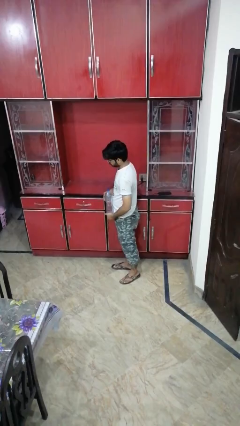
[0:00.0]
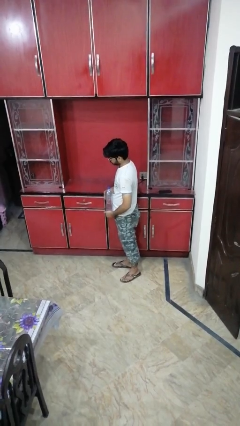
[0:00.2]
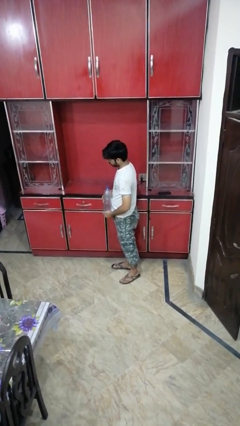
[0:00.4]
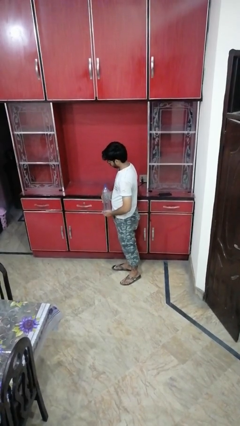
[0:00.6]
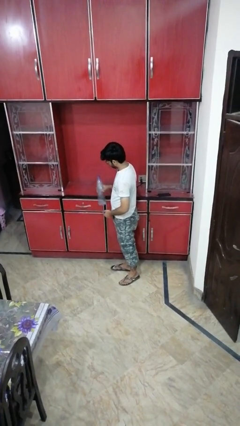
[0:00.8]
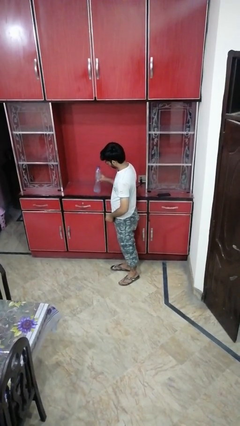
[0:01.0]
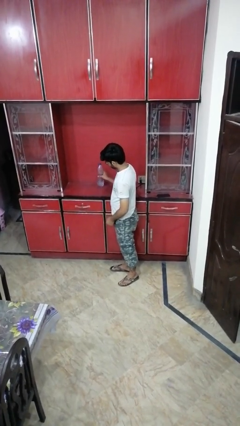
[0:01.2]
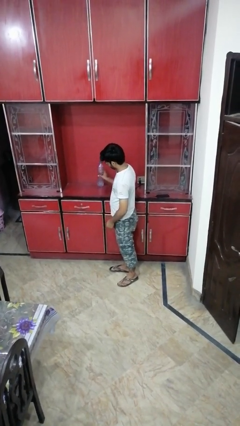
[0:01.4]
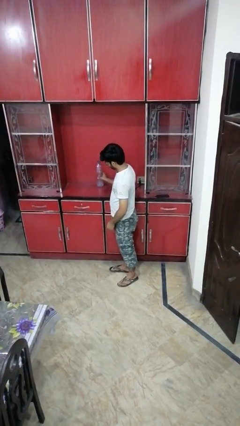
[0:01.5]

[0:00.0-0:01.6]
person puts down object on countertop

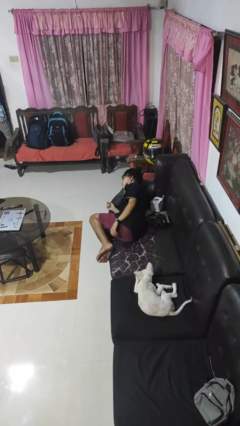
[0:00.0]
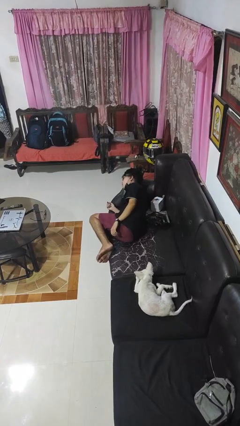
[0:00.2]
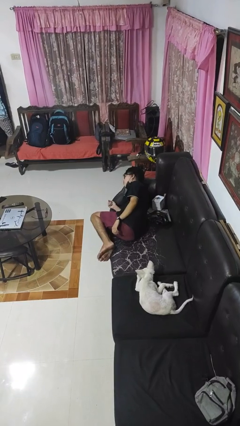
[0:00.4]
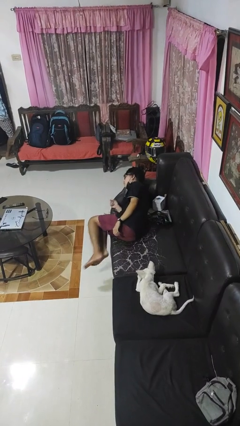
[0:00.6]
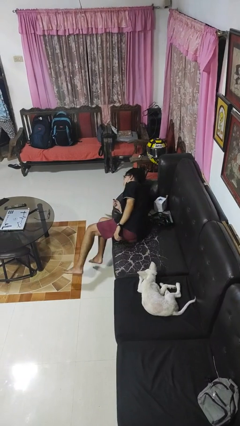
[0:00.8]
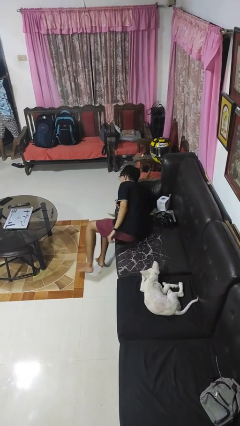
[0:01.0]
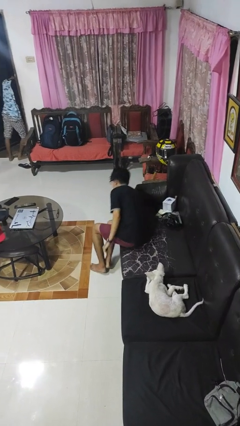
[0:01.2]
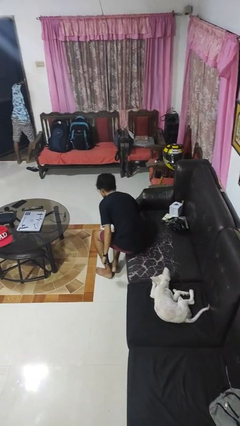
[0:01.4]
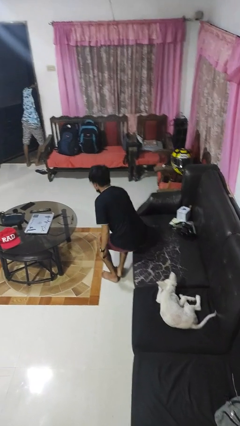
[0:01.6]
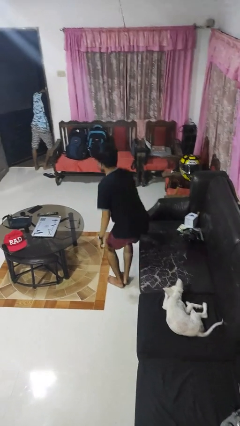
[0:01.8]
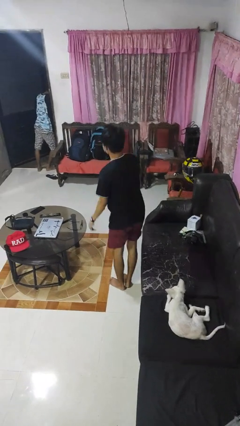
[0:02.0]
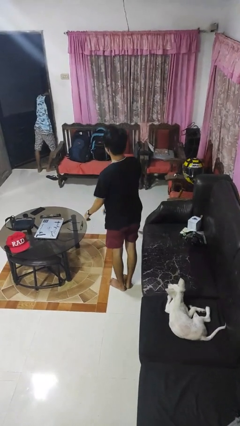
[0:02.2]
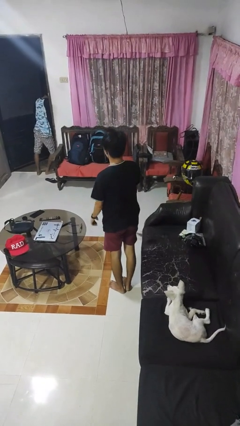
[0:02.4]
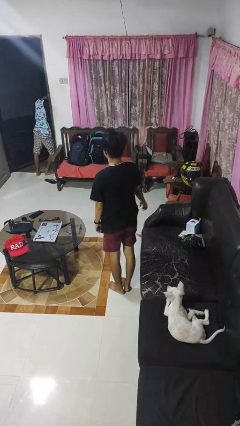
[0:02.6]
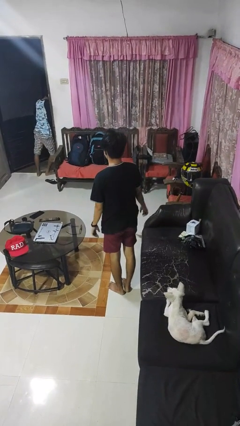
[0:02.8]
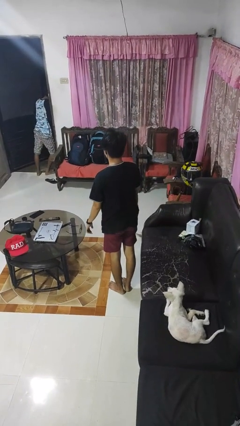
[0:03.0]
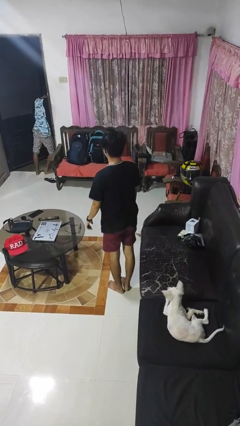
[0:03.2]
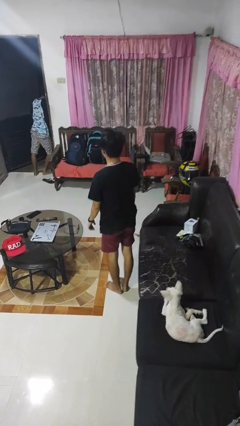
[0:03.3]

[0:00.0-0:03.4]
person stands up

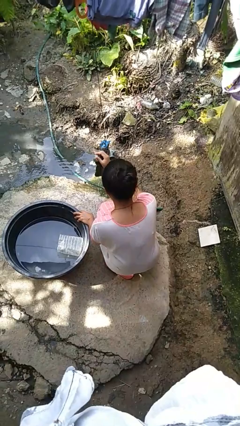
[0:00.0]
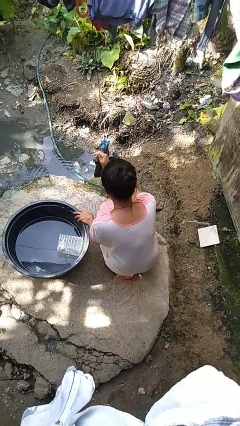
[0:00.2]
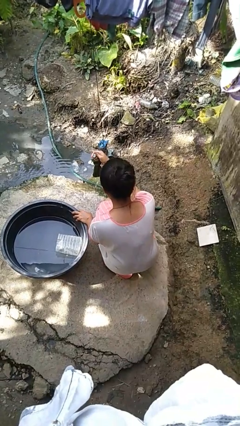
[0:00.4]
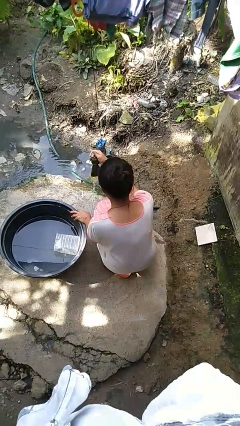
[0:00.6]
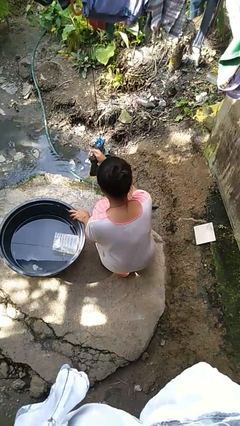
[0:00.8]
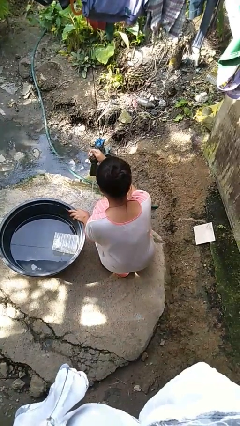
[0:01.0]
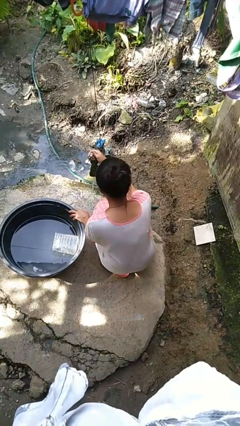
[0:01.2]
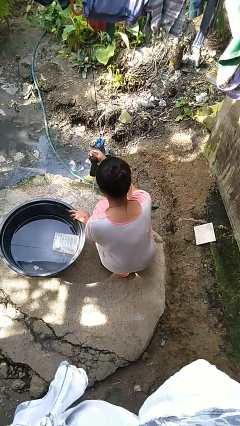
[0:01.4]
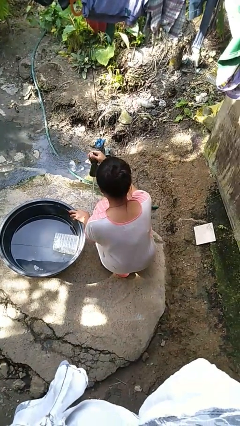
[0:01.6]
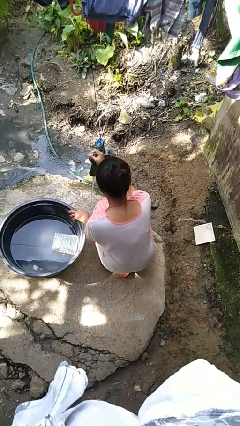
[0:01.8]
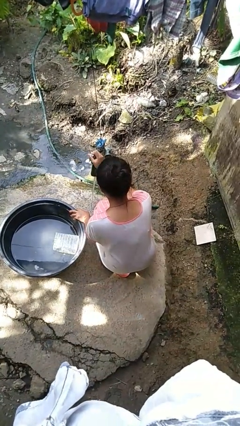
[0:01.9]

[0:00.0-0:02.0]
person turns on faucet

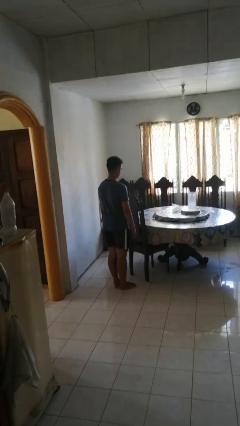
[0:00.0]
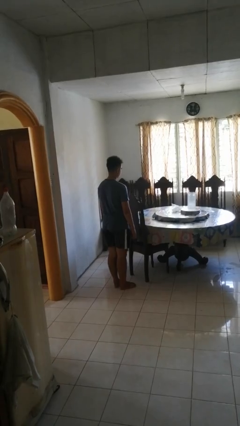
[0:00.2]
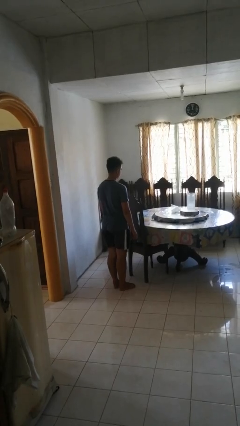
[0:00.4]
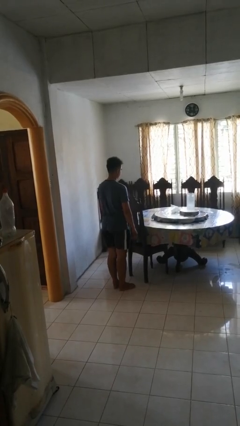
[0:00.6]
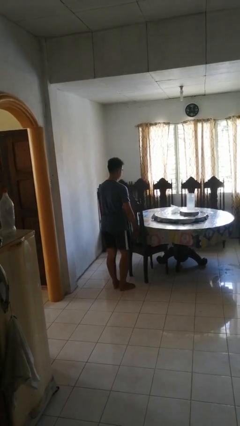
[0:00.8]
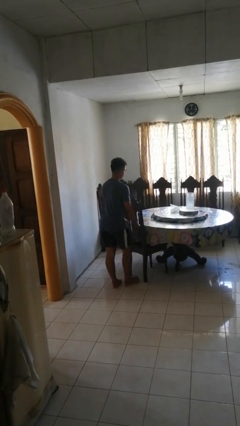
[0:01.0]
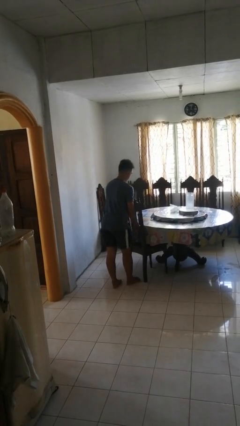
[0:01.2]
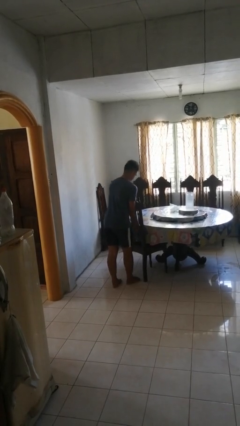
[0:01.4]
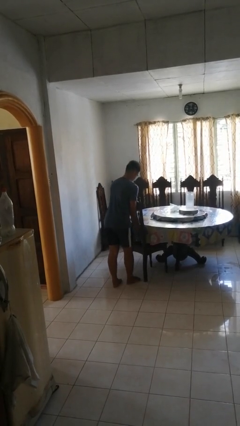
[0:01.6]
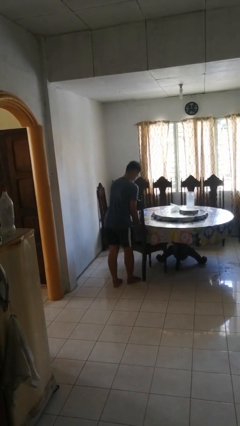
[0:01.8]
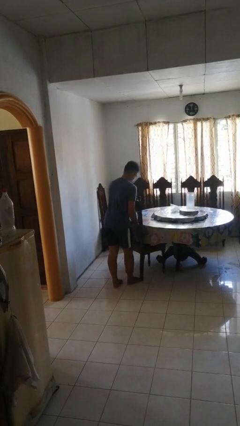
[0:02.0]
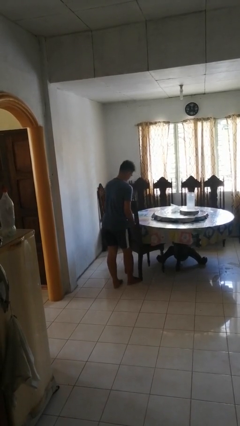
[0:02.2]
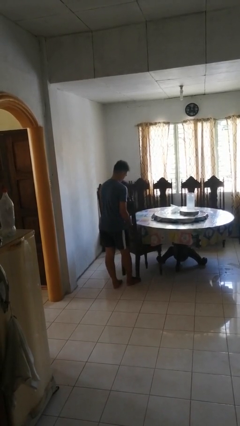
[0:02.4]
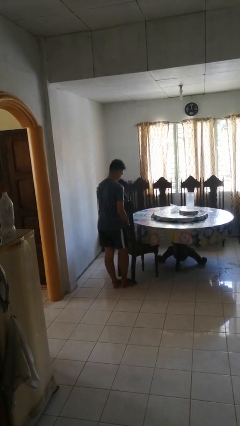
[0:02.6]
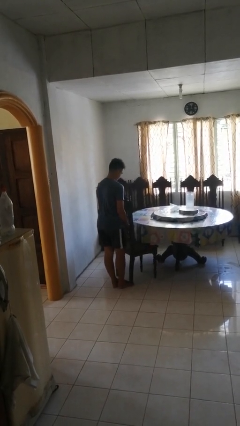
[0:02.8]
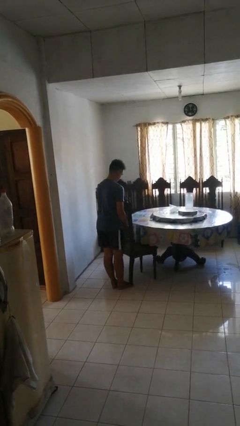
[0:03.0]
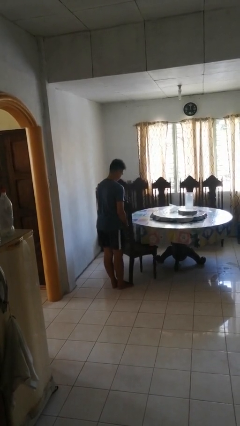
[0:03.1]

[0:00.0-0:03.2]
person pulls out chair

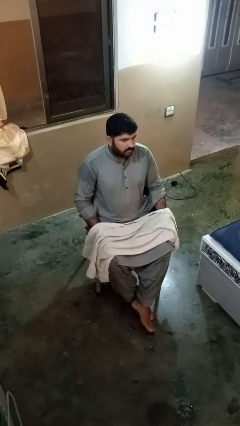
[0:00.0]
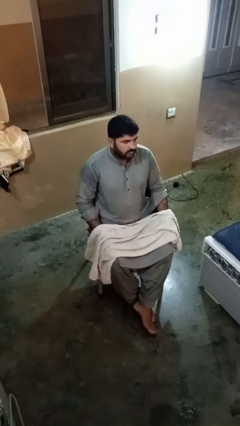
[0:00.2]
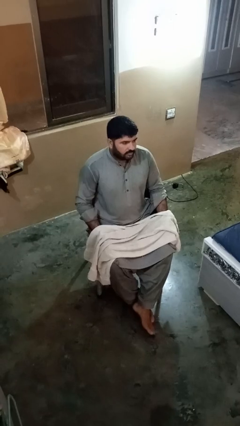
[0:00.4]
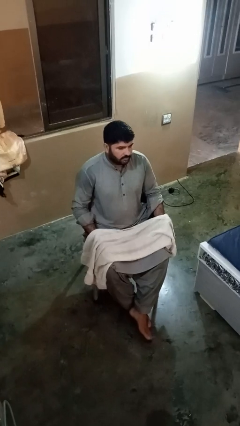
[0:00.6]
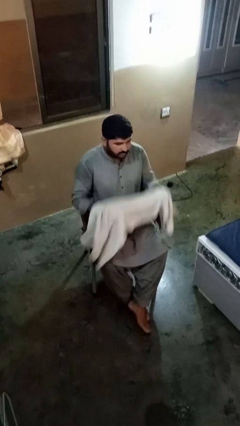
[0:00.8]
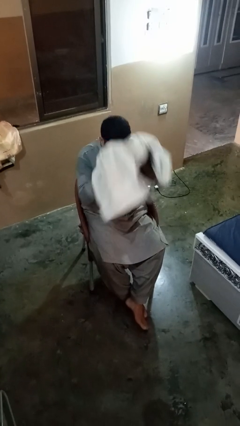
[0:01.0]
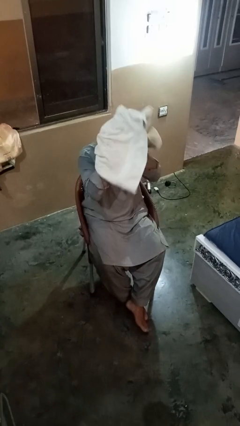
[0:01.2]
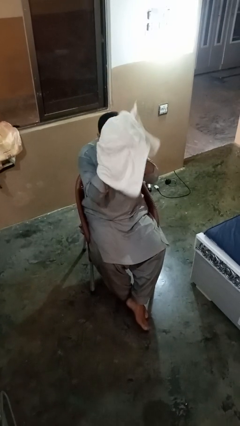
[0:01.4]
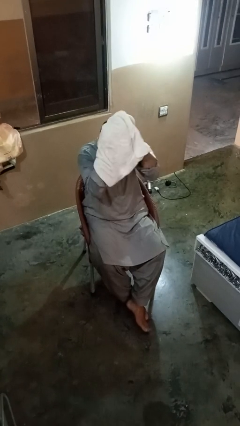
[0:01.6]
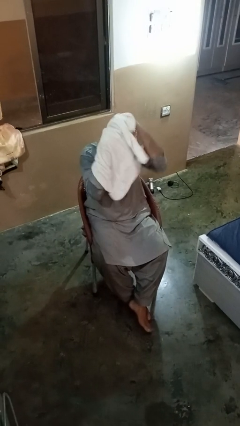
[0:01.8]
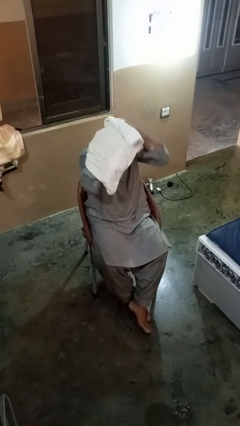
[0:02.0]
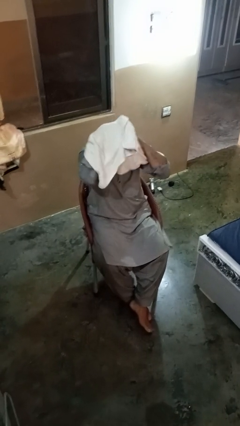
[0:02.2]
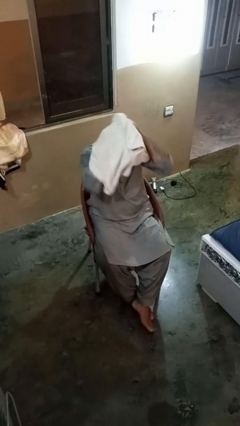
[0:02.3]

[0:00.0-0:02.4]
person dries hair with towel

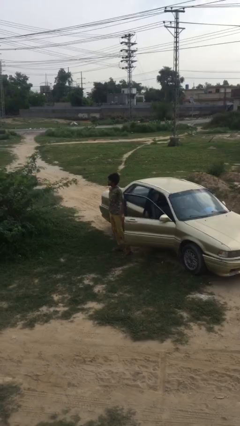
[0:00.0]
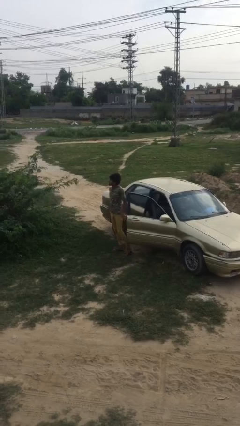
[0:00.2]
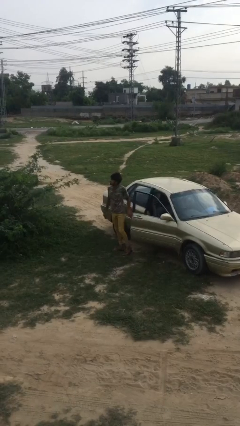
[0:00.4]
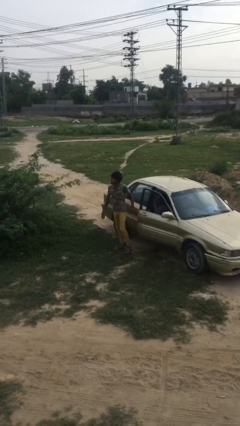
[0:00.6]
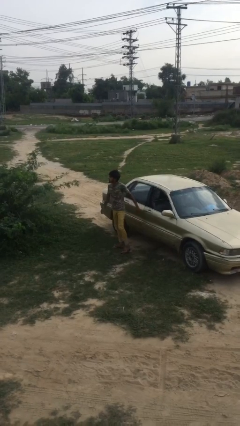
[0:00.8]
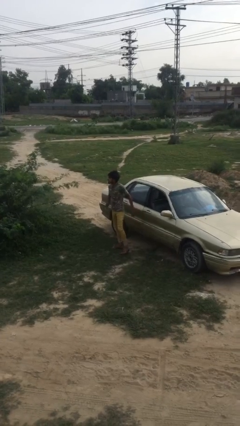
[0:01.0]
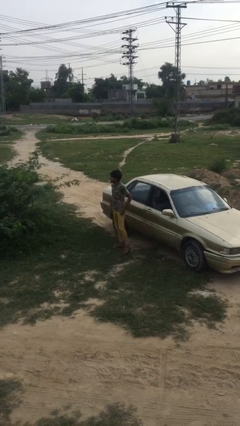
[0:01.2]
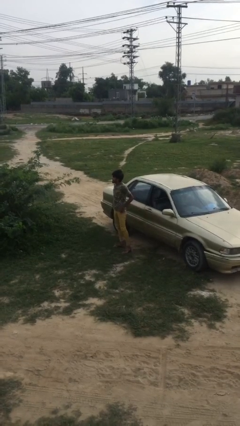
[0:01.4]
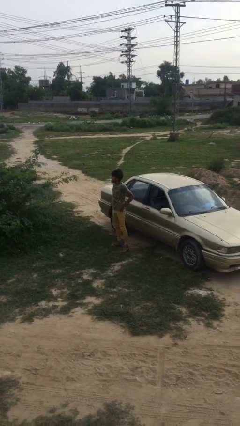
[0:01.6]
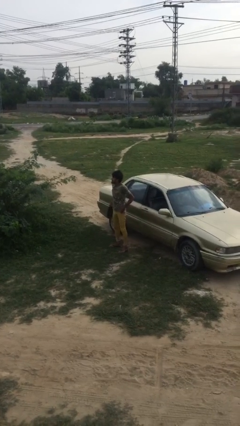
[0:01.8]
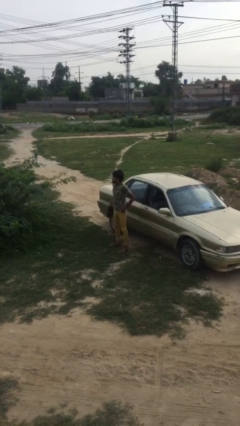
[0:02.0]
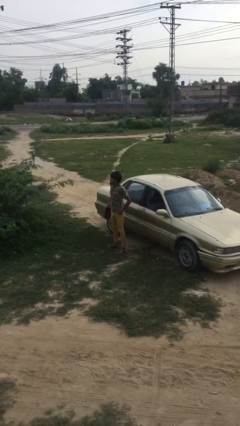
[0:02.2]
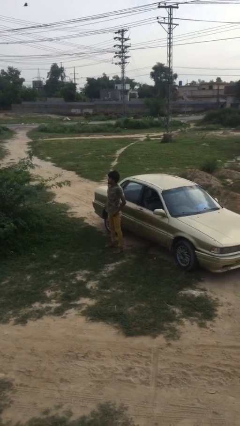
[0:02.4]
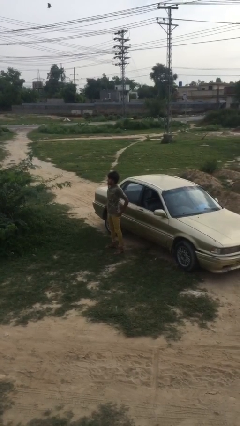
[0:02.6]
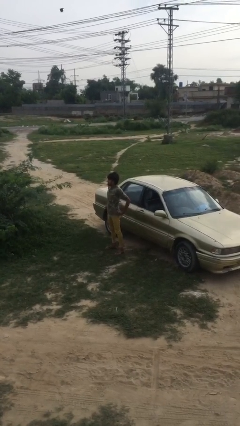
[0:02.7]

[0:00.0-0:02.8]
person closes car door

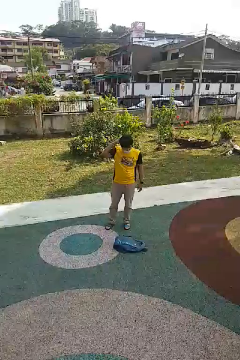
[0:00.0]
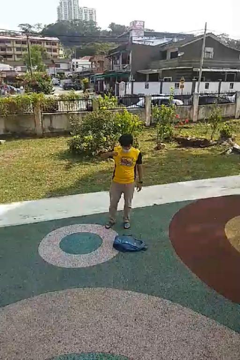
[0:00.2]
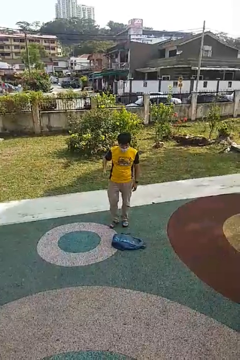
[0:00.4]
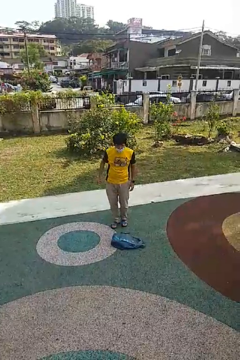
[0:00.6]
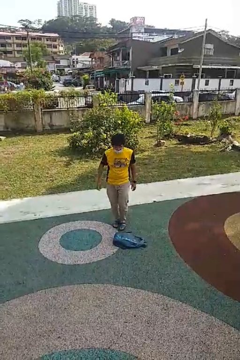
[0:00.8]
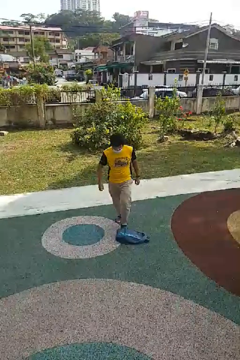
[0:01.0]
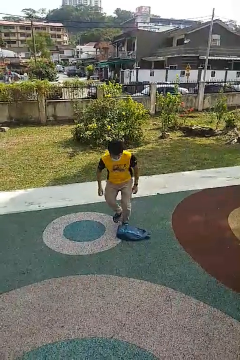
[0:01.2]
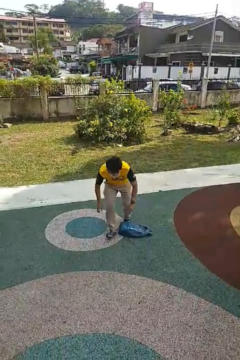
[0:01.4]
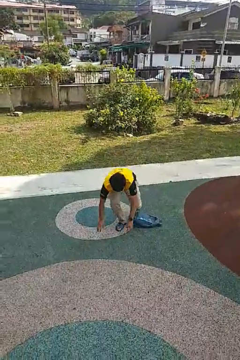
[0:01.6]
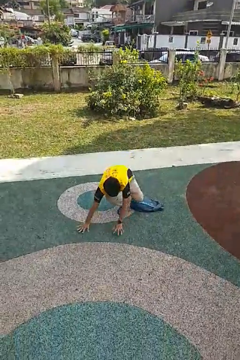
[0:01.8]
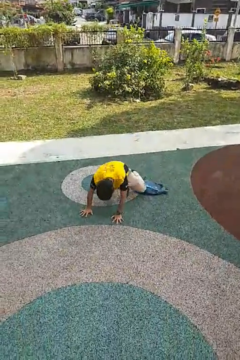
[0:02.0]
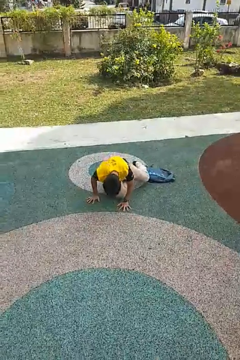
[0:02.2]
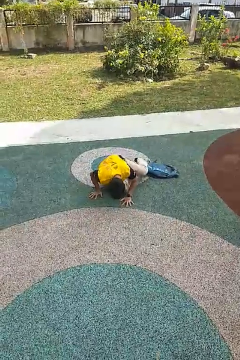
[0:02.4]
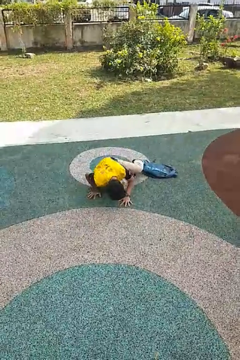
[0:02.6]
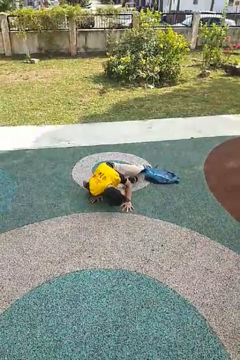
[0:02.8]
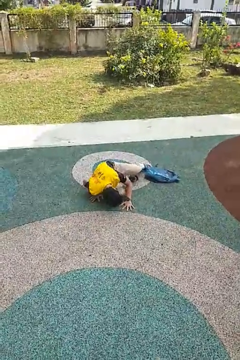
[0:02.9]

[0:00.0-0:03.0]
person trips on object on floor
